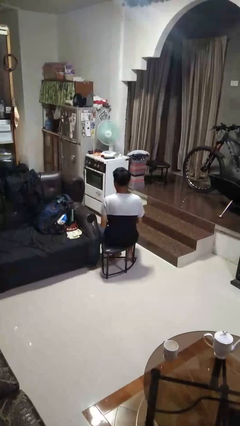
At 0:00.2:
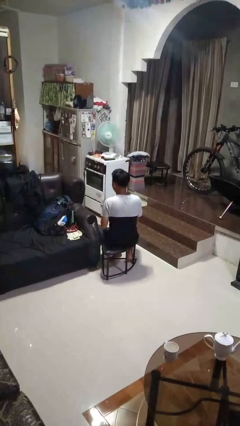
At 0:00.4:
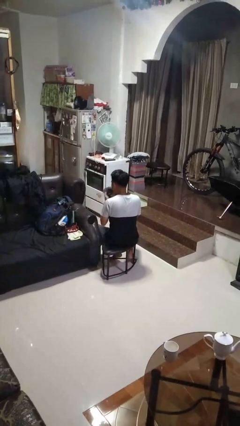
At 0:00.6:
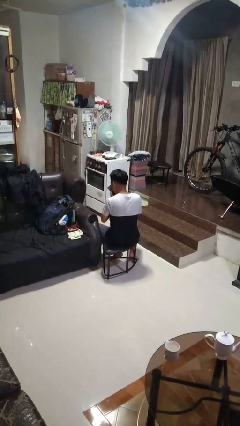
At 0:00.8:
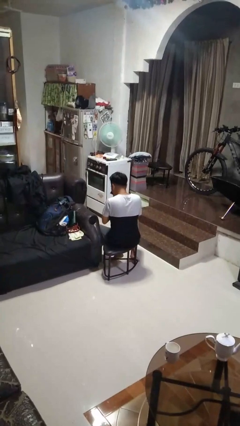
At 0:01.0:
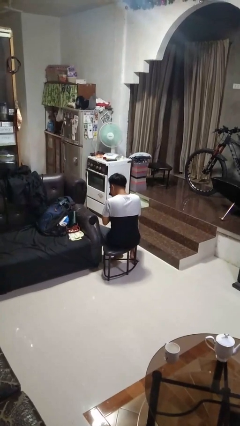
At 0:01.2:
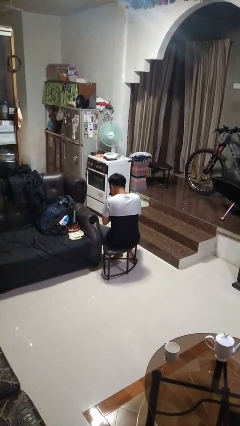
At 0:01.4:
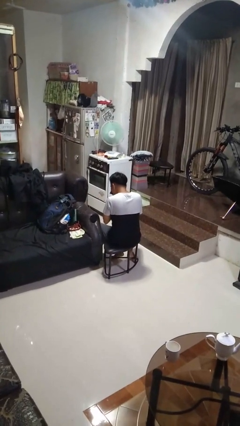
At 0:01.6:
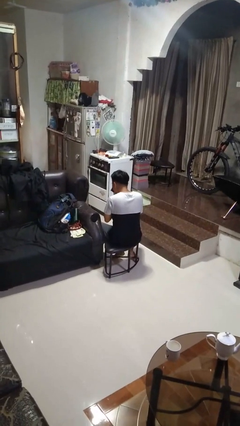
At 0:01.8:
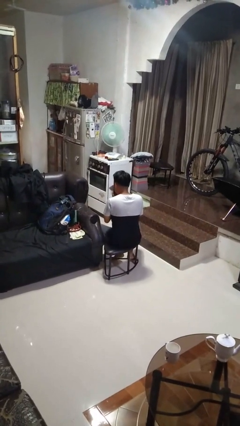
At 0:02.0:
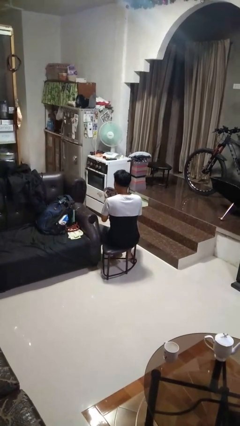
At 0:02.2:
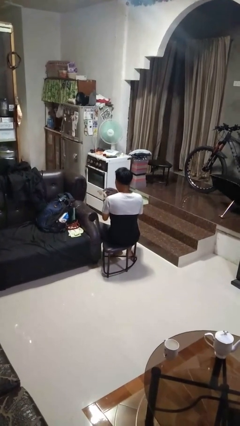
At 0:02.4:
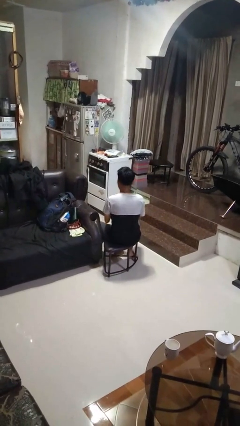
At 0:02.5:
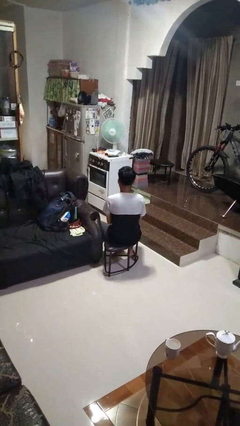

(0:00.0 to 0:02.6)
person blows nose

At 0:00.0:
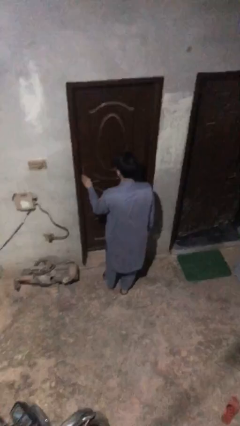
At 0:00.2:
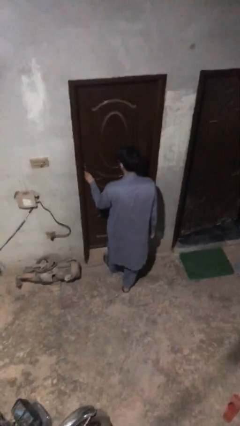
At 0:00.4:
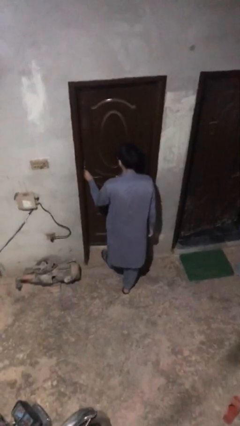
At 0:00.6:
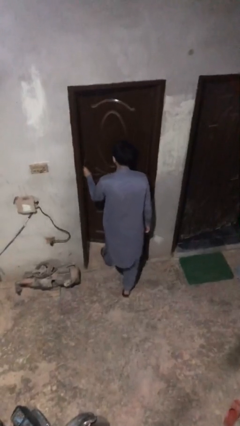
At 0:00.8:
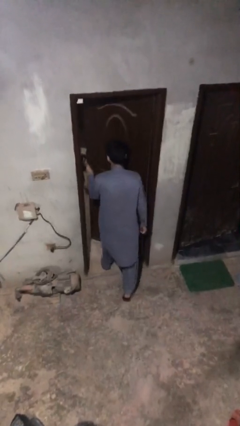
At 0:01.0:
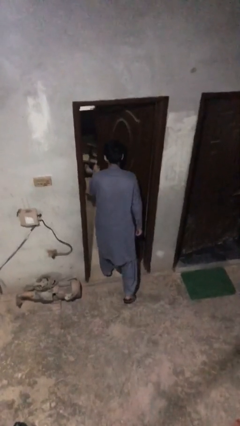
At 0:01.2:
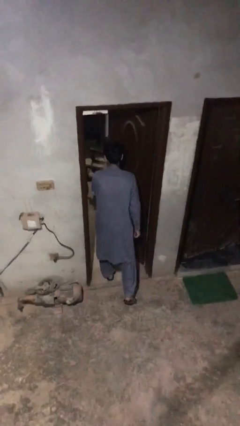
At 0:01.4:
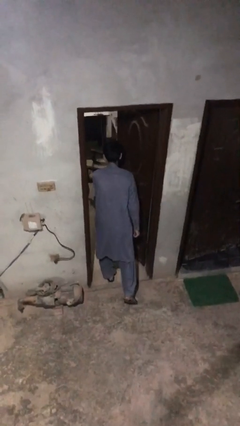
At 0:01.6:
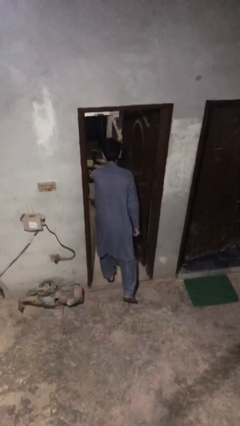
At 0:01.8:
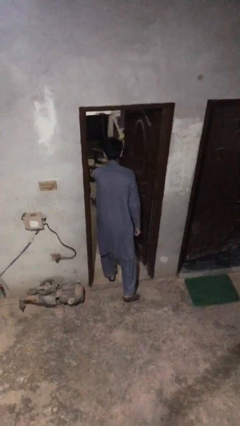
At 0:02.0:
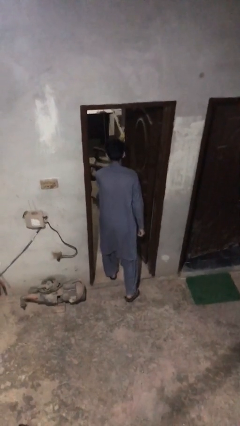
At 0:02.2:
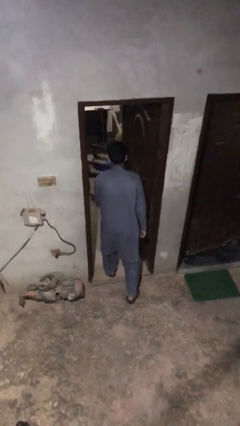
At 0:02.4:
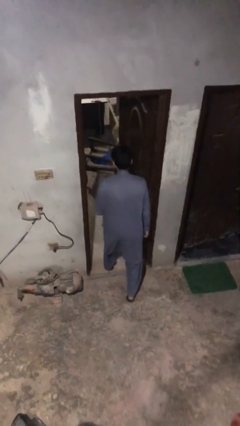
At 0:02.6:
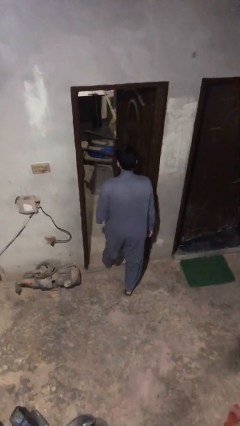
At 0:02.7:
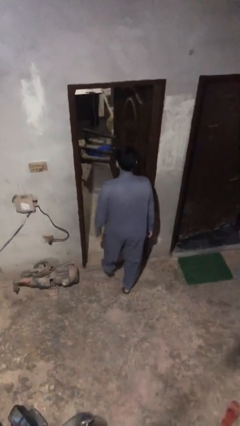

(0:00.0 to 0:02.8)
person opens facility door

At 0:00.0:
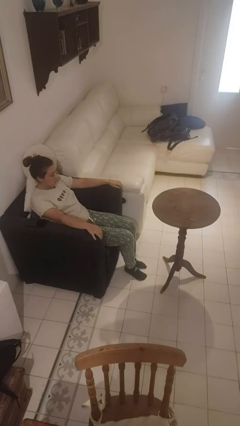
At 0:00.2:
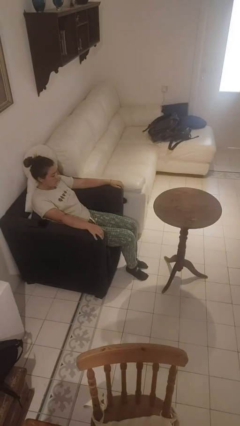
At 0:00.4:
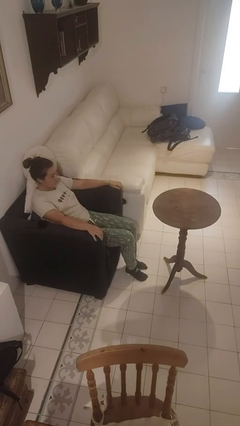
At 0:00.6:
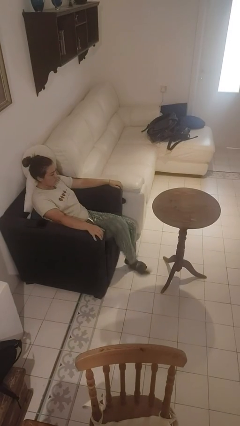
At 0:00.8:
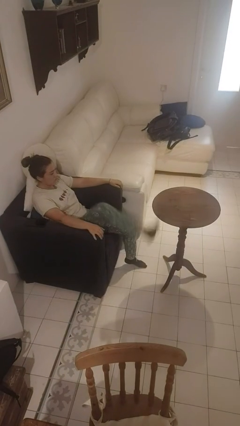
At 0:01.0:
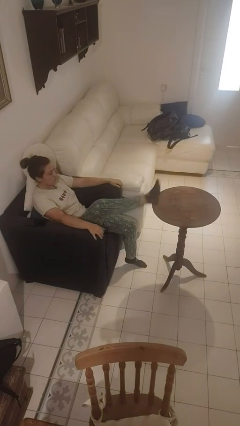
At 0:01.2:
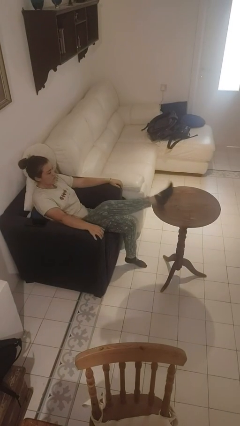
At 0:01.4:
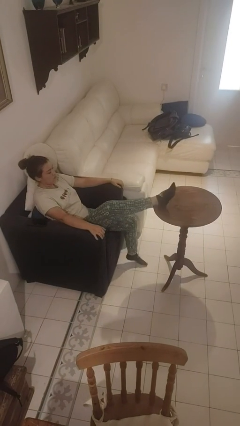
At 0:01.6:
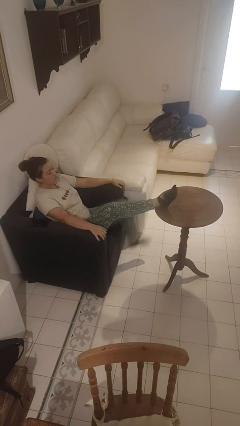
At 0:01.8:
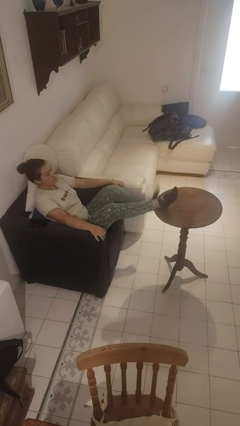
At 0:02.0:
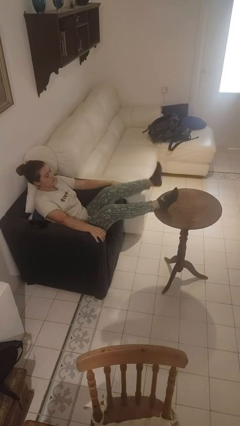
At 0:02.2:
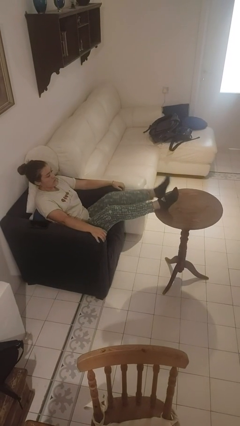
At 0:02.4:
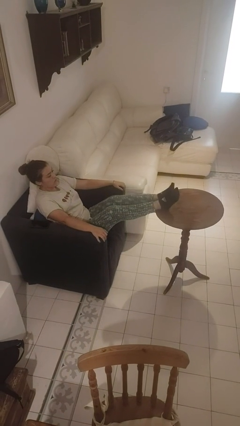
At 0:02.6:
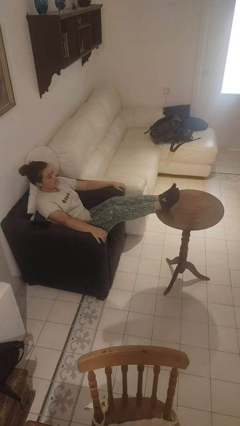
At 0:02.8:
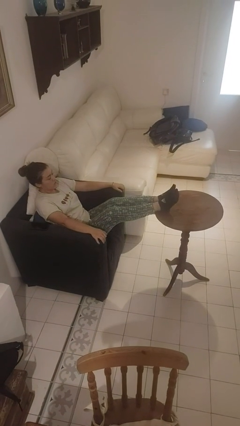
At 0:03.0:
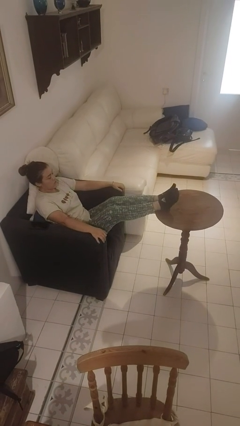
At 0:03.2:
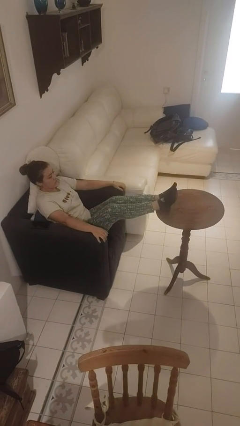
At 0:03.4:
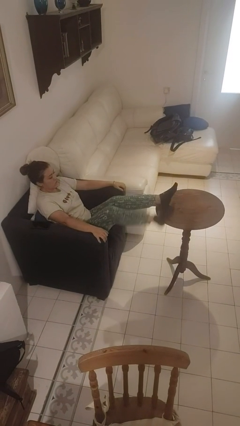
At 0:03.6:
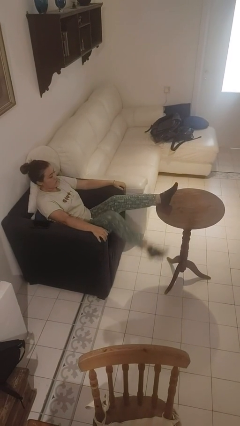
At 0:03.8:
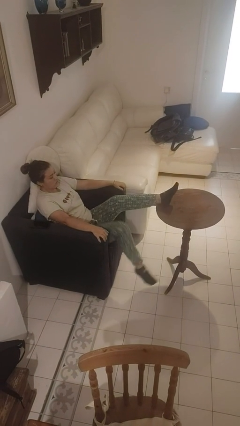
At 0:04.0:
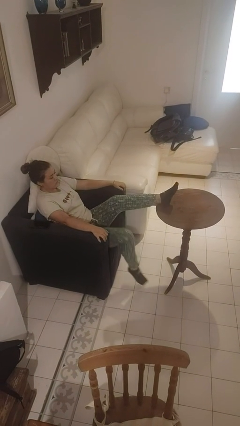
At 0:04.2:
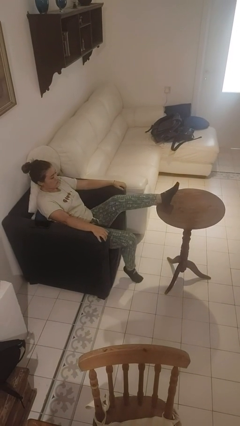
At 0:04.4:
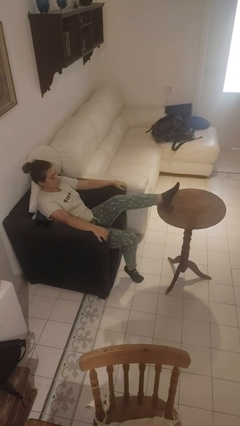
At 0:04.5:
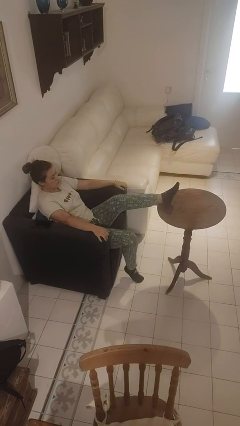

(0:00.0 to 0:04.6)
person puts feet up

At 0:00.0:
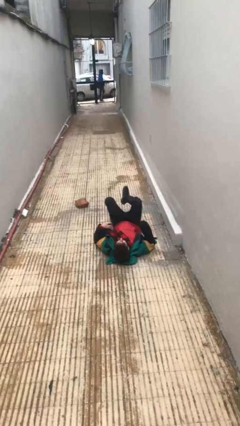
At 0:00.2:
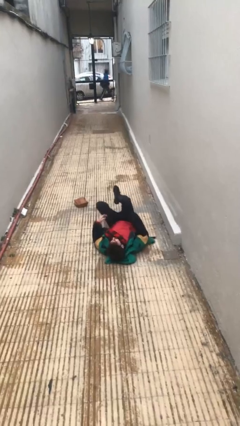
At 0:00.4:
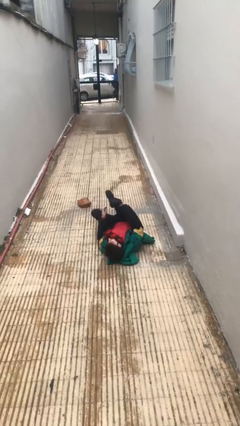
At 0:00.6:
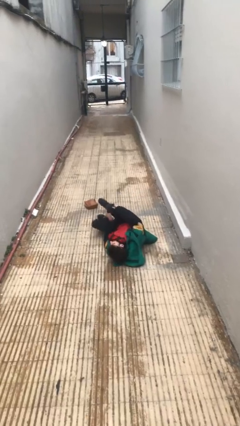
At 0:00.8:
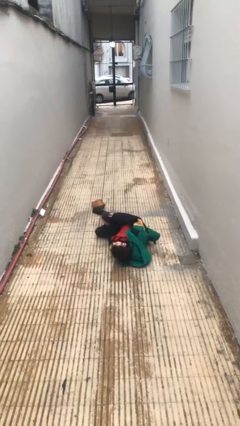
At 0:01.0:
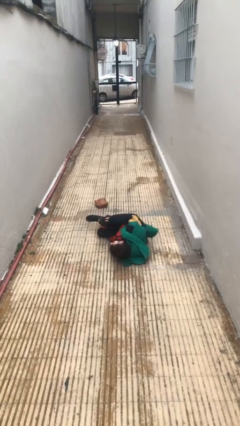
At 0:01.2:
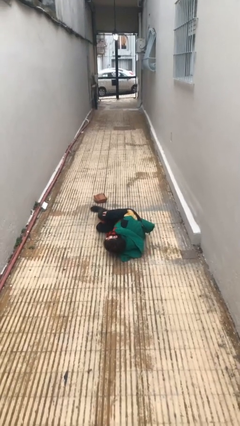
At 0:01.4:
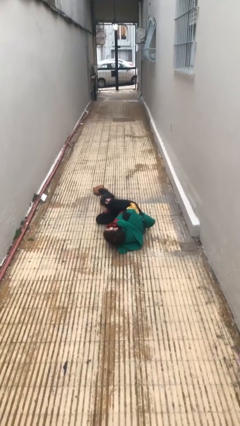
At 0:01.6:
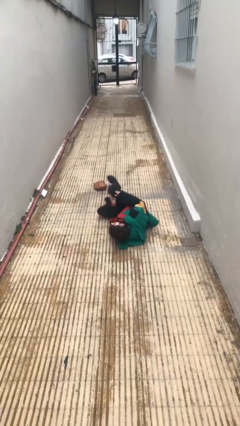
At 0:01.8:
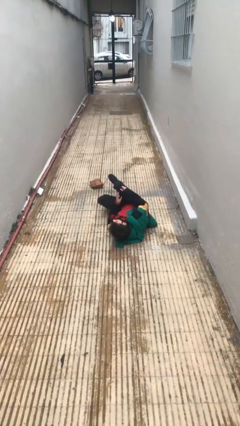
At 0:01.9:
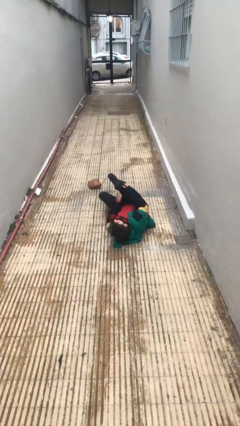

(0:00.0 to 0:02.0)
person lies down on floor

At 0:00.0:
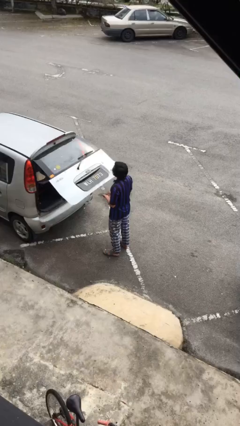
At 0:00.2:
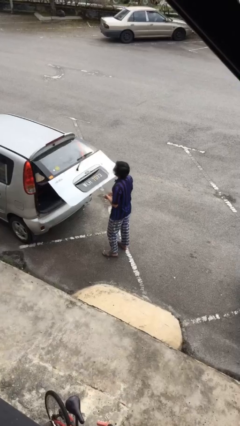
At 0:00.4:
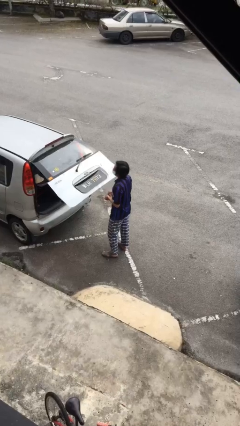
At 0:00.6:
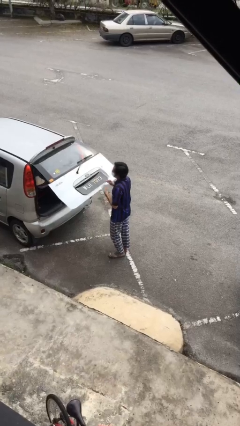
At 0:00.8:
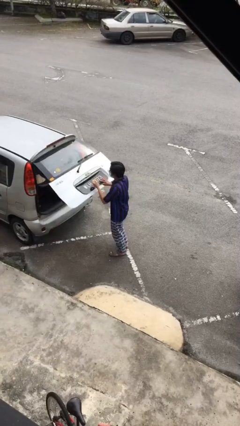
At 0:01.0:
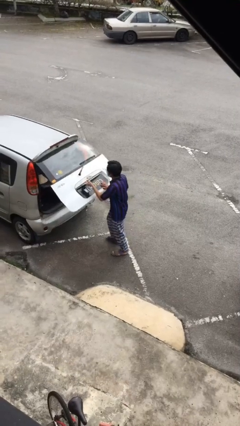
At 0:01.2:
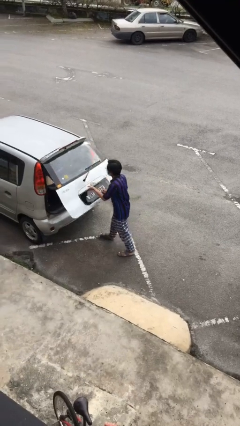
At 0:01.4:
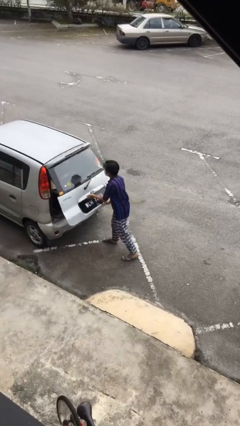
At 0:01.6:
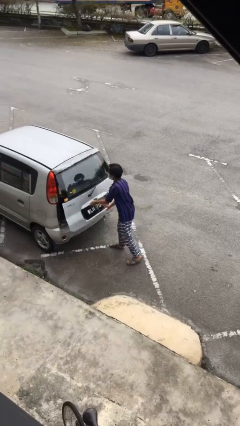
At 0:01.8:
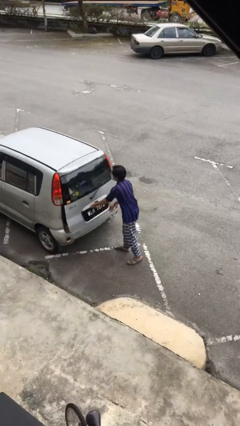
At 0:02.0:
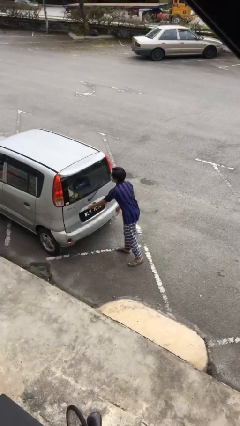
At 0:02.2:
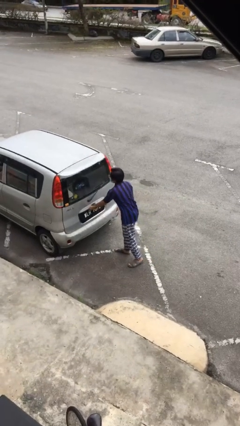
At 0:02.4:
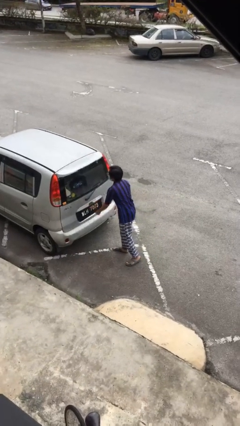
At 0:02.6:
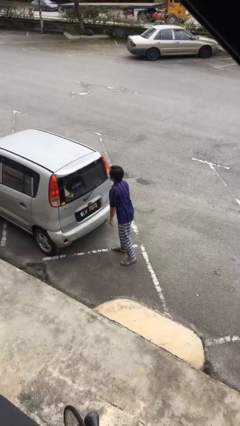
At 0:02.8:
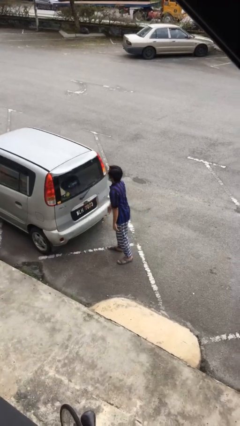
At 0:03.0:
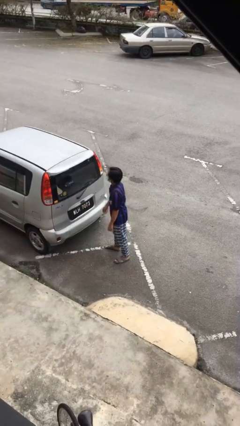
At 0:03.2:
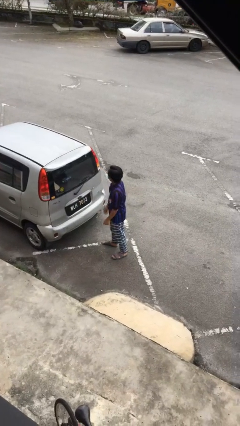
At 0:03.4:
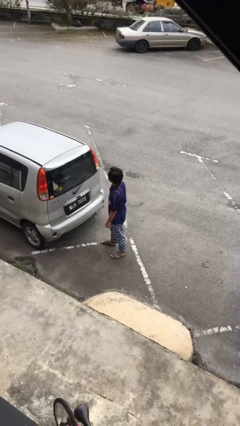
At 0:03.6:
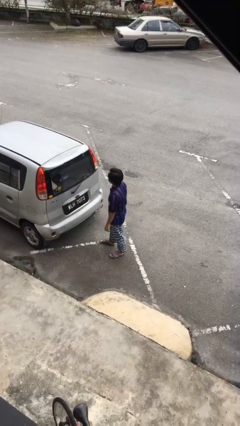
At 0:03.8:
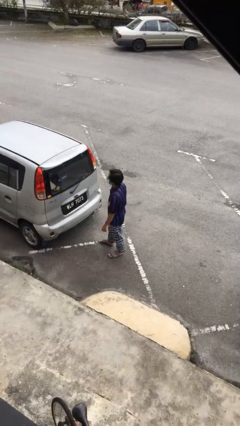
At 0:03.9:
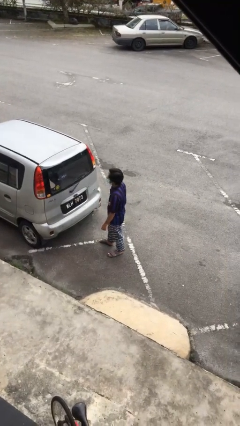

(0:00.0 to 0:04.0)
person closes car trunk

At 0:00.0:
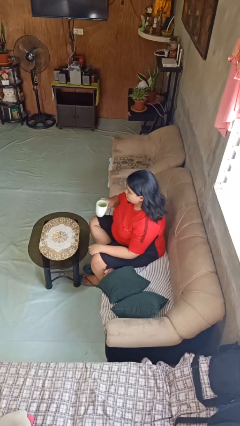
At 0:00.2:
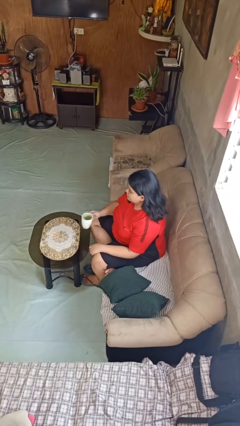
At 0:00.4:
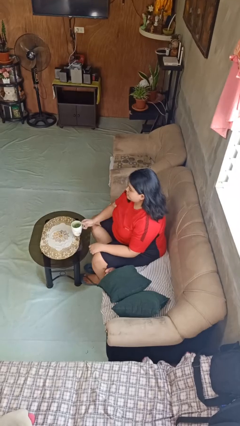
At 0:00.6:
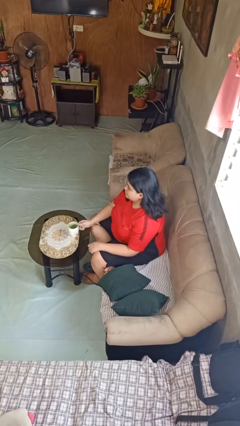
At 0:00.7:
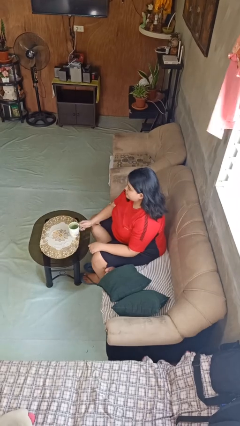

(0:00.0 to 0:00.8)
person puts down object on table

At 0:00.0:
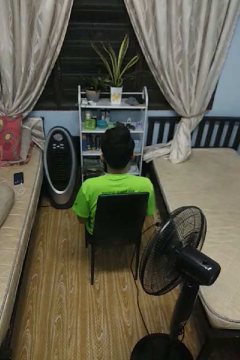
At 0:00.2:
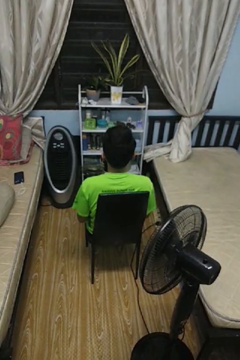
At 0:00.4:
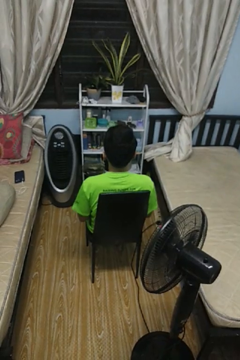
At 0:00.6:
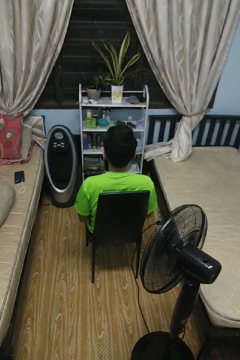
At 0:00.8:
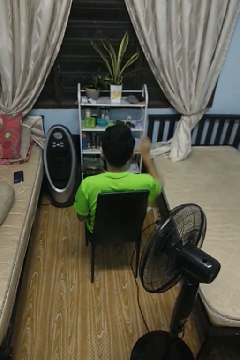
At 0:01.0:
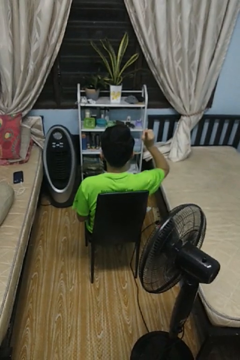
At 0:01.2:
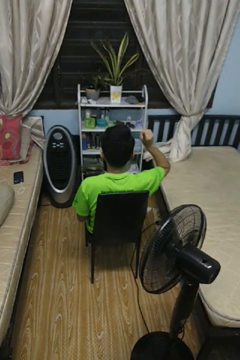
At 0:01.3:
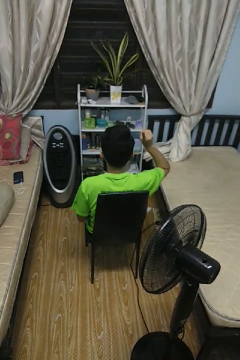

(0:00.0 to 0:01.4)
person gestures number one
